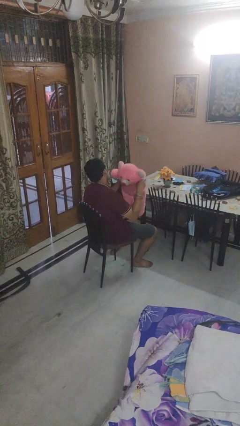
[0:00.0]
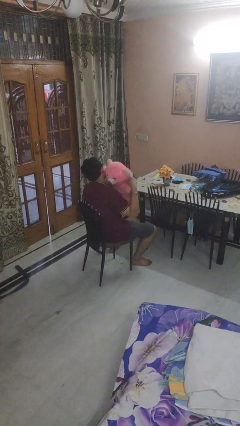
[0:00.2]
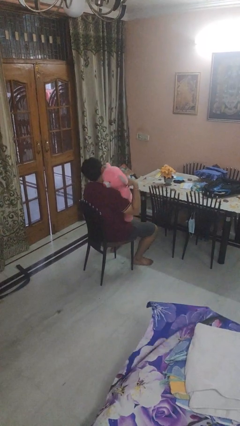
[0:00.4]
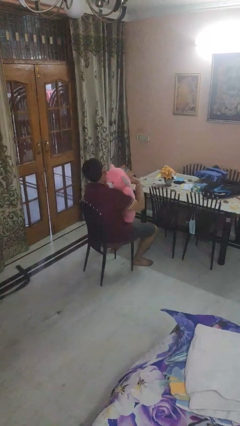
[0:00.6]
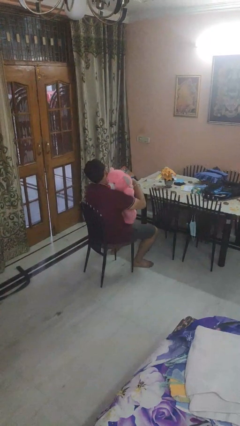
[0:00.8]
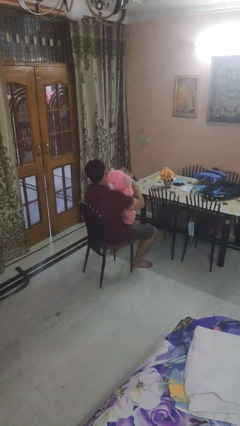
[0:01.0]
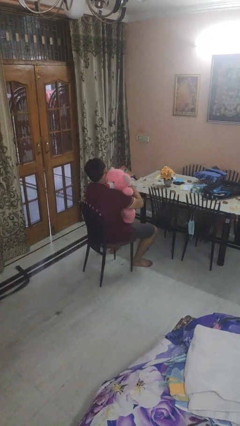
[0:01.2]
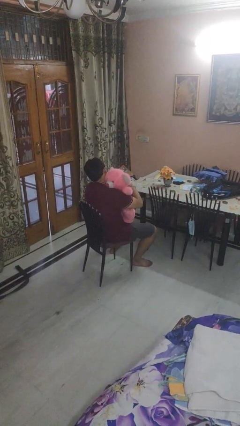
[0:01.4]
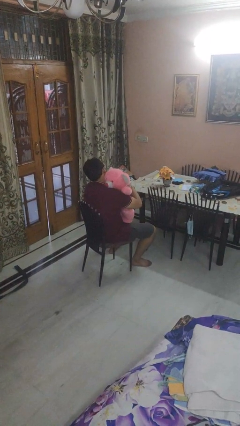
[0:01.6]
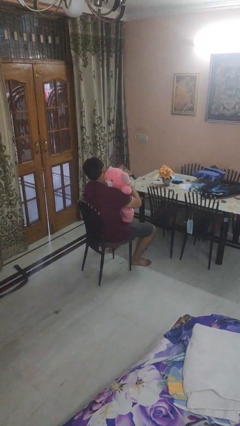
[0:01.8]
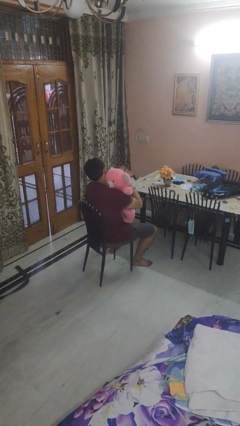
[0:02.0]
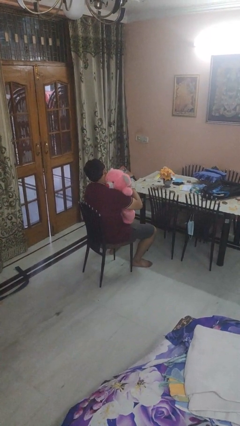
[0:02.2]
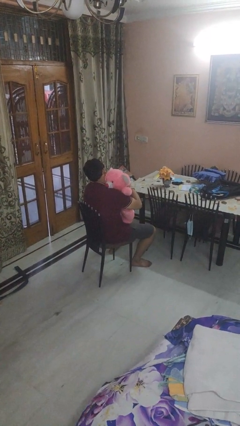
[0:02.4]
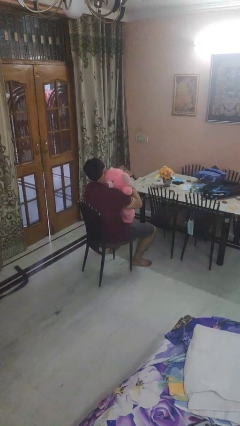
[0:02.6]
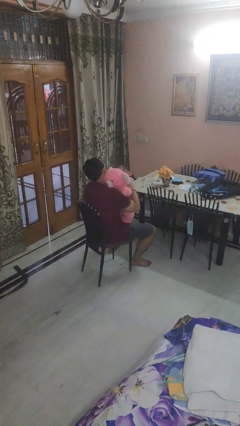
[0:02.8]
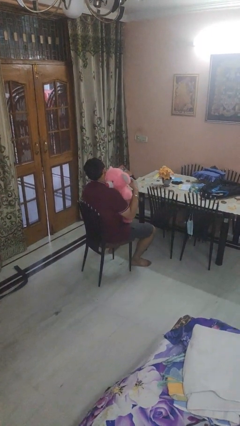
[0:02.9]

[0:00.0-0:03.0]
person hugs stuffed animal

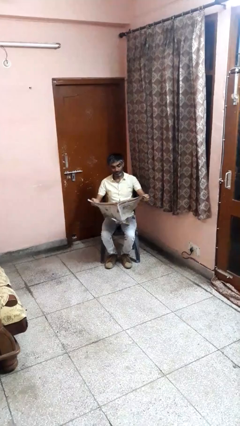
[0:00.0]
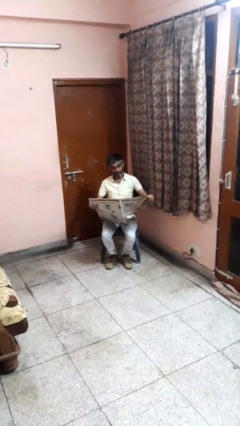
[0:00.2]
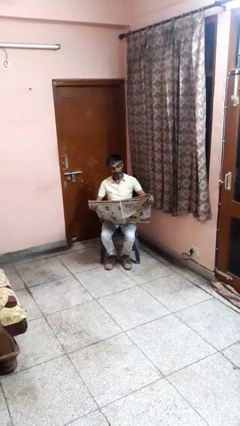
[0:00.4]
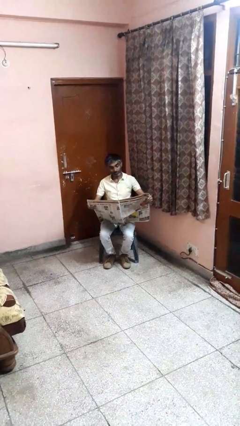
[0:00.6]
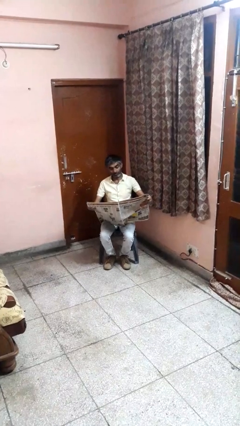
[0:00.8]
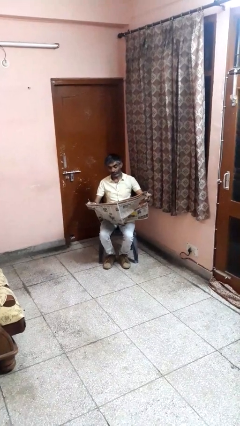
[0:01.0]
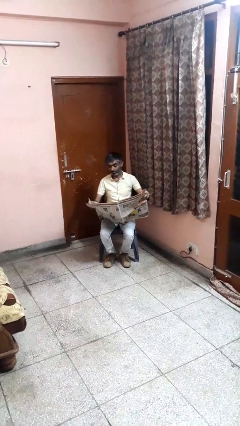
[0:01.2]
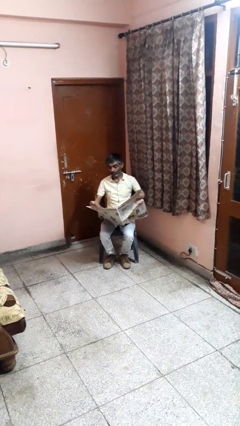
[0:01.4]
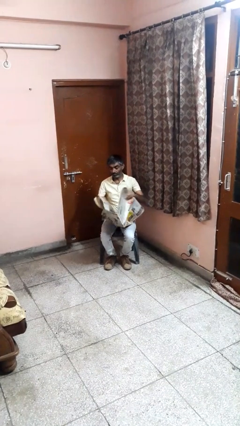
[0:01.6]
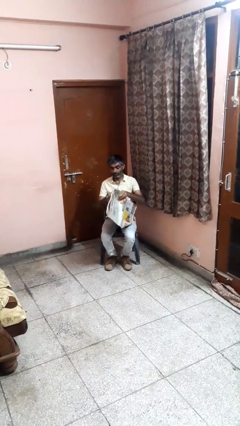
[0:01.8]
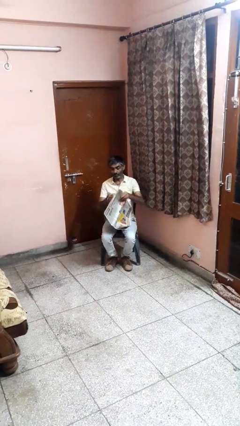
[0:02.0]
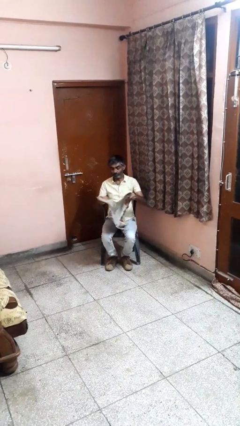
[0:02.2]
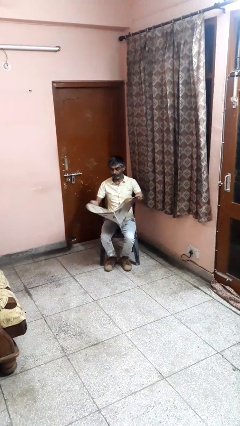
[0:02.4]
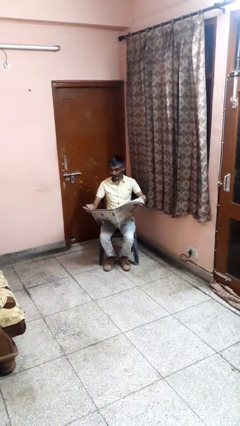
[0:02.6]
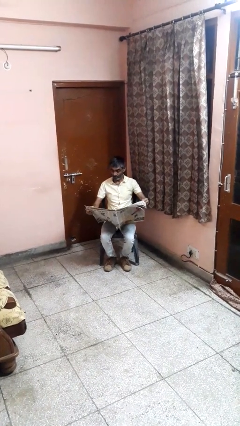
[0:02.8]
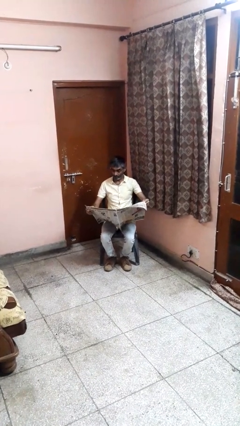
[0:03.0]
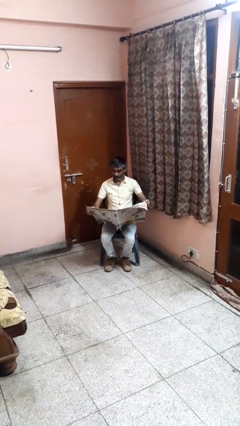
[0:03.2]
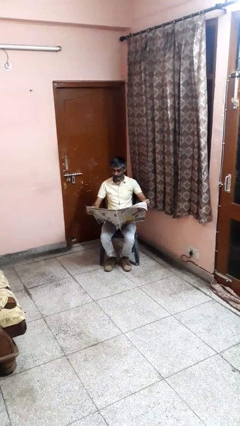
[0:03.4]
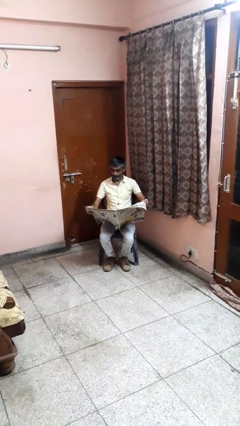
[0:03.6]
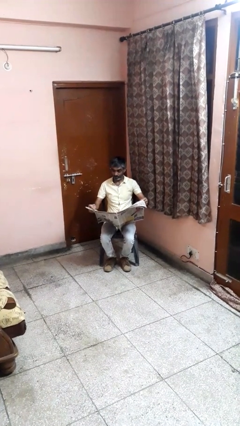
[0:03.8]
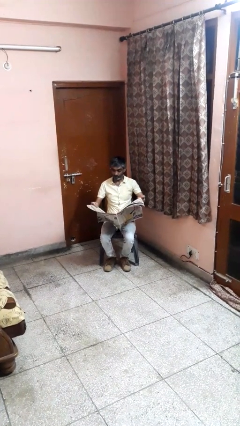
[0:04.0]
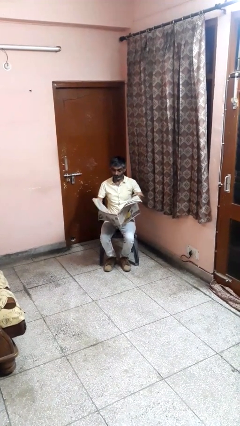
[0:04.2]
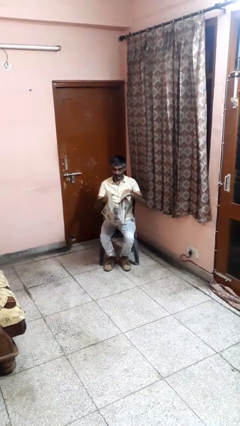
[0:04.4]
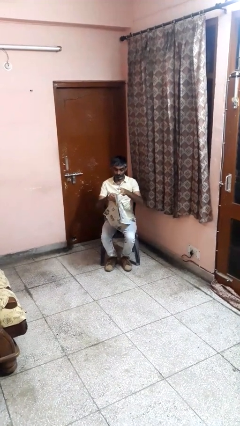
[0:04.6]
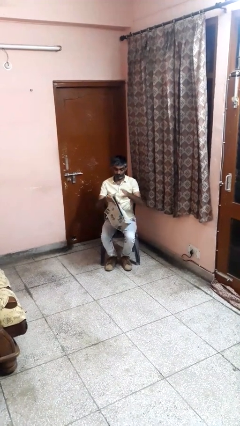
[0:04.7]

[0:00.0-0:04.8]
person reads newspaper

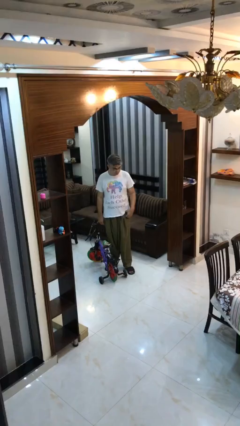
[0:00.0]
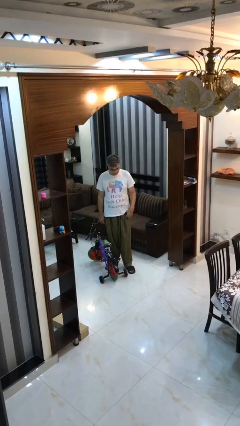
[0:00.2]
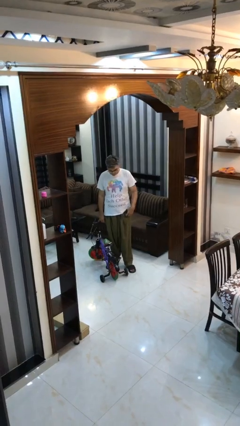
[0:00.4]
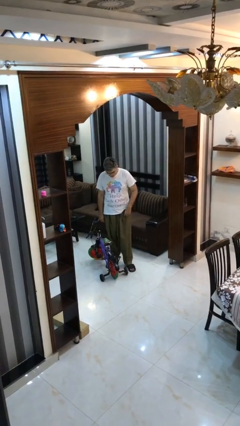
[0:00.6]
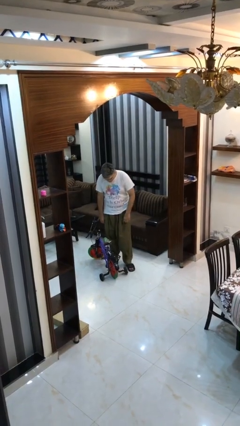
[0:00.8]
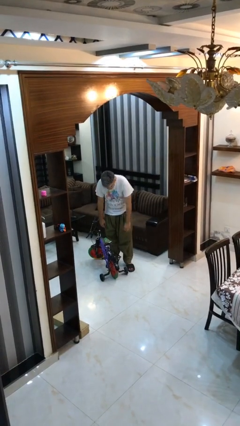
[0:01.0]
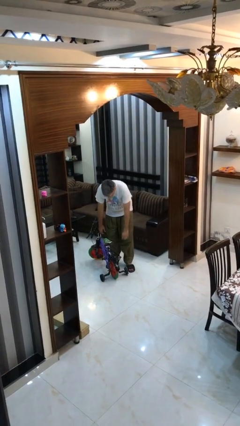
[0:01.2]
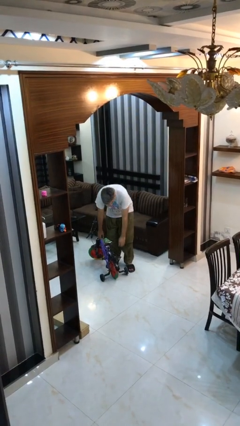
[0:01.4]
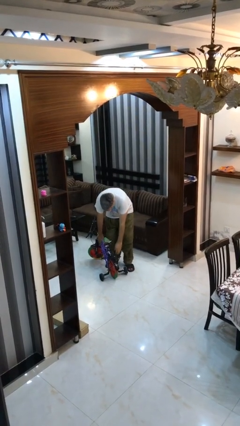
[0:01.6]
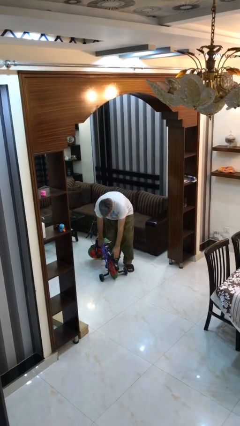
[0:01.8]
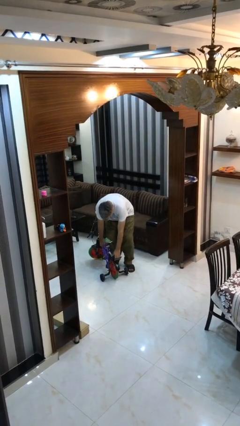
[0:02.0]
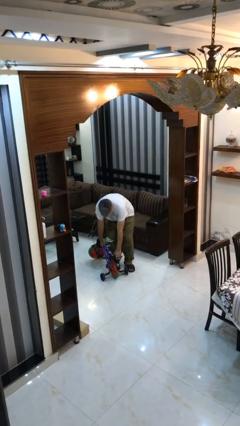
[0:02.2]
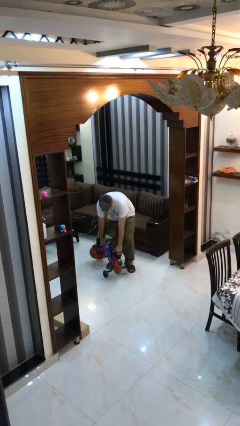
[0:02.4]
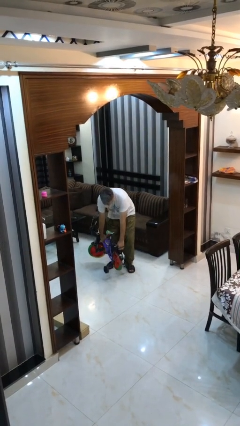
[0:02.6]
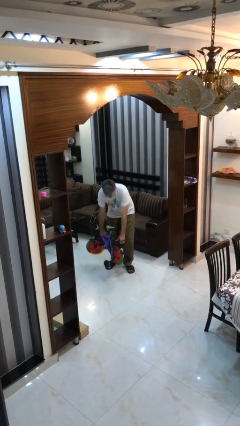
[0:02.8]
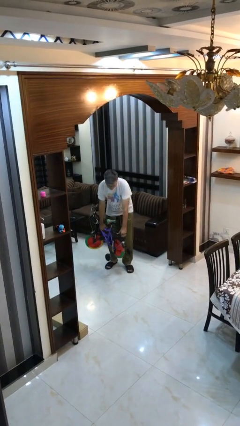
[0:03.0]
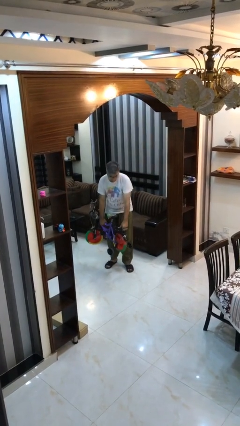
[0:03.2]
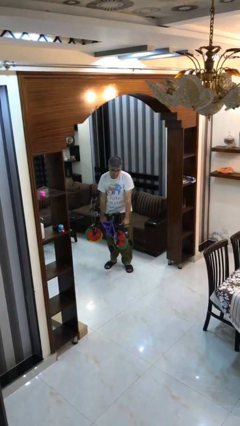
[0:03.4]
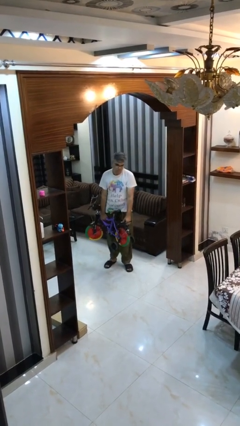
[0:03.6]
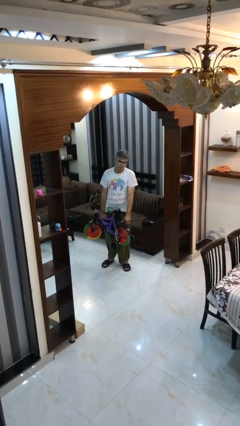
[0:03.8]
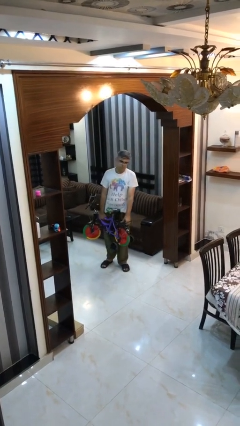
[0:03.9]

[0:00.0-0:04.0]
person picks up object from floor

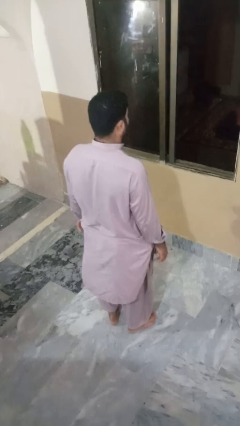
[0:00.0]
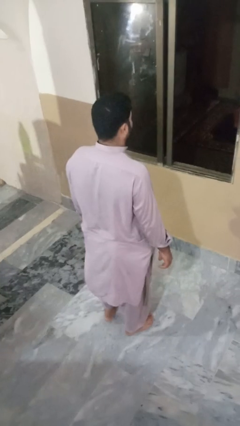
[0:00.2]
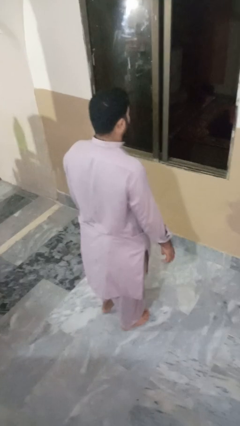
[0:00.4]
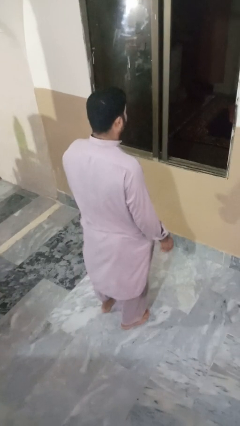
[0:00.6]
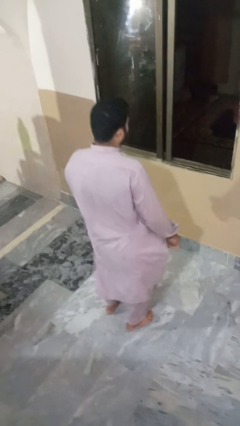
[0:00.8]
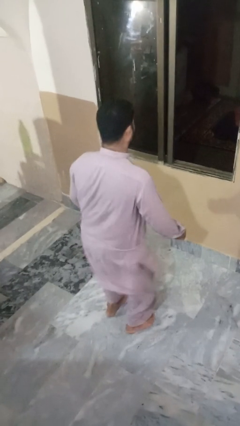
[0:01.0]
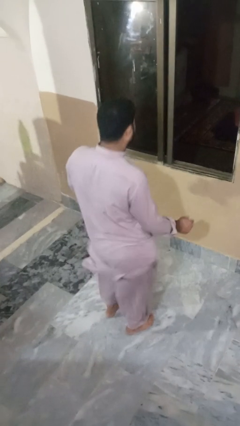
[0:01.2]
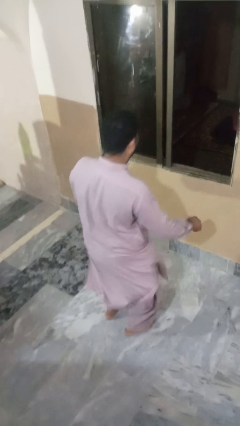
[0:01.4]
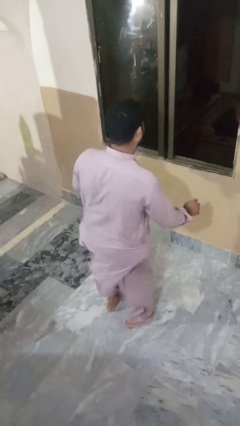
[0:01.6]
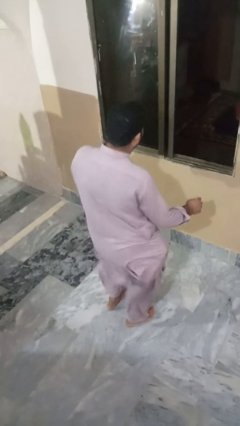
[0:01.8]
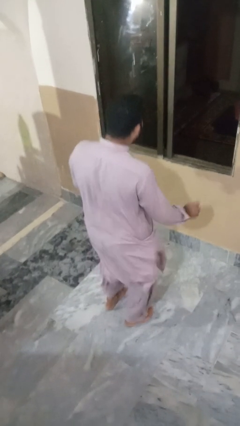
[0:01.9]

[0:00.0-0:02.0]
person wiggles hips

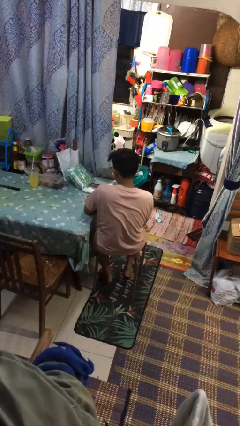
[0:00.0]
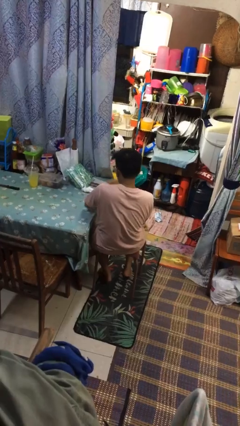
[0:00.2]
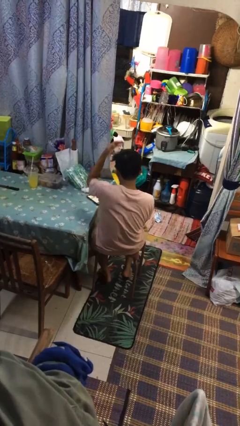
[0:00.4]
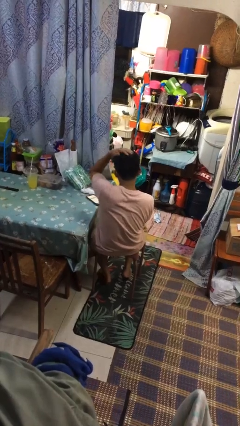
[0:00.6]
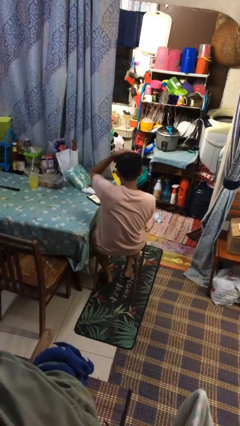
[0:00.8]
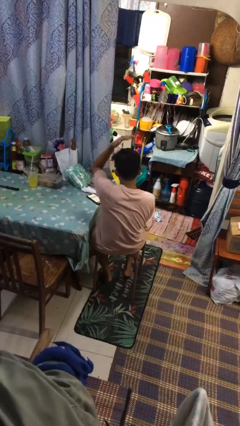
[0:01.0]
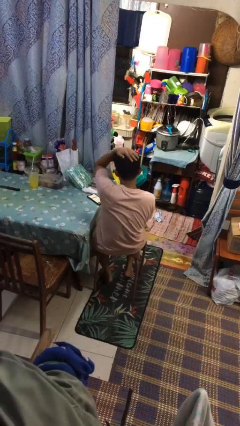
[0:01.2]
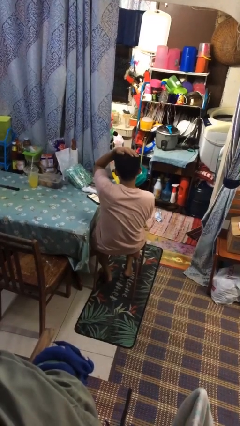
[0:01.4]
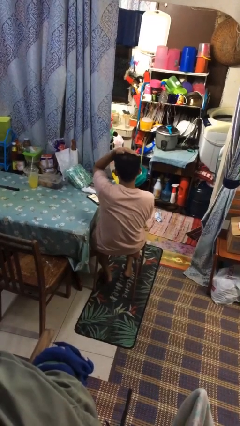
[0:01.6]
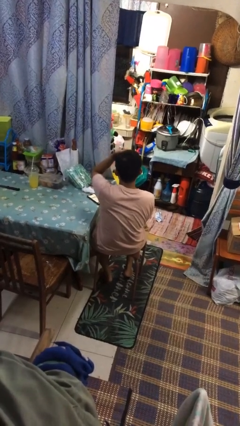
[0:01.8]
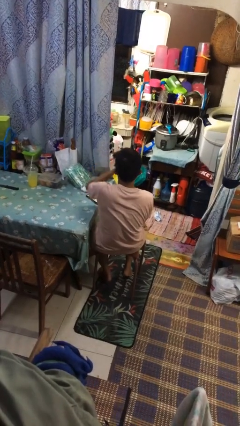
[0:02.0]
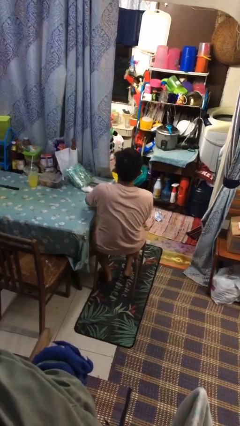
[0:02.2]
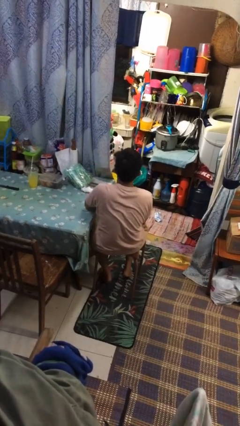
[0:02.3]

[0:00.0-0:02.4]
person pats head

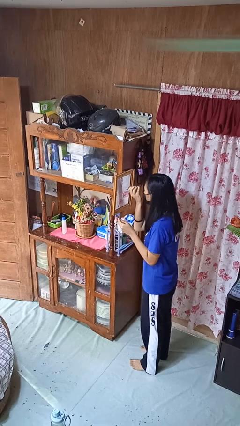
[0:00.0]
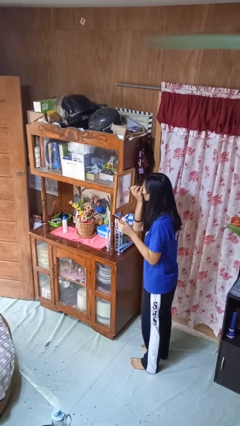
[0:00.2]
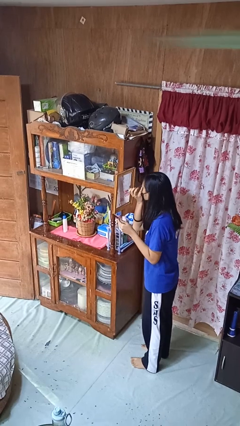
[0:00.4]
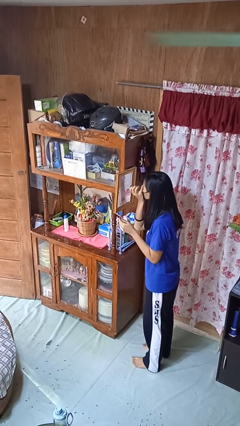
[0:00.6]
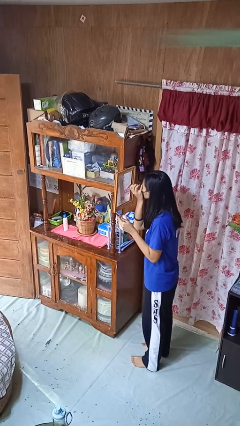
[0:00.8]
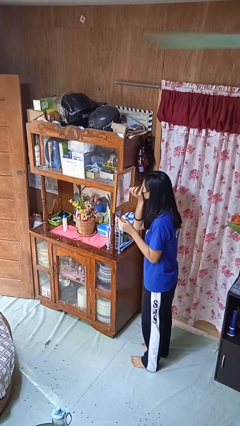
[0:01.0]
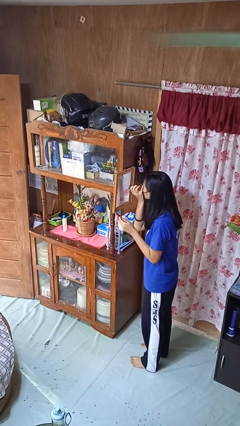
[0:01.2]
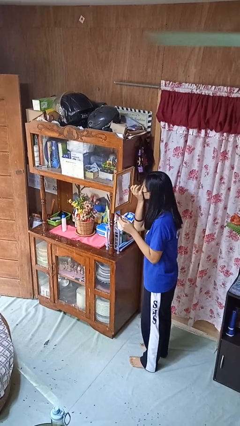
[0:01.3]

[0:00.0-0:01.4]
person applies eye makeup
